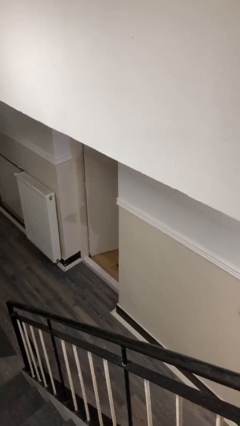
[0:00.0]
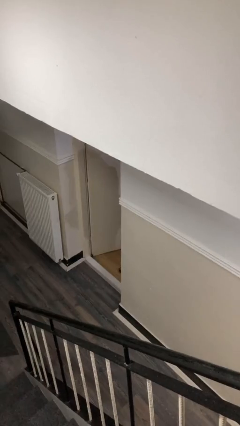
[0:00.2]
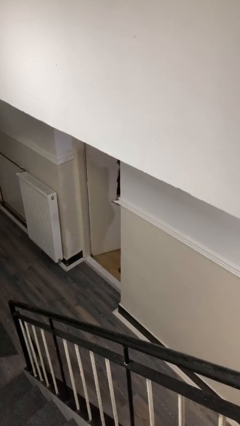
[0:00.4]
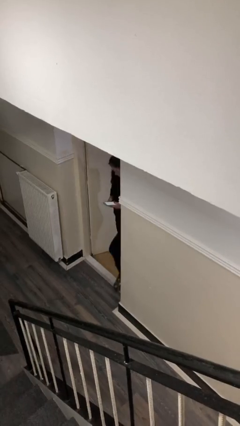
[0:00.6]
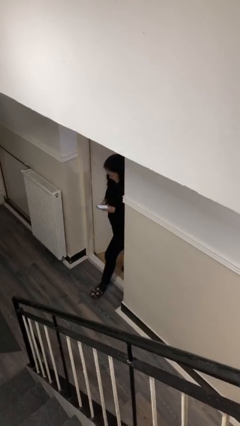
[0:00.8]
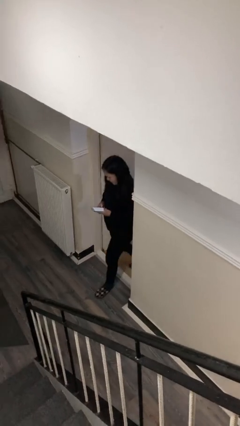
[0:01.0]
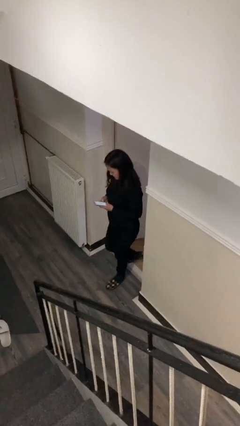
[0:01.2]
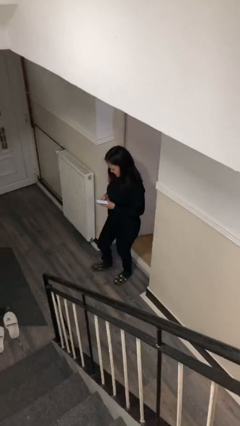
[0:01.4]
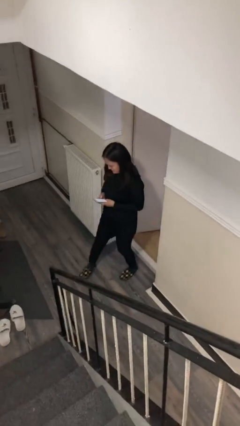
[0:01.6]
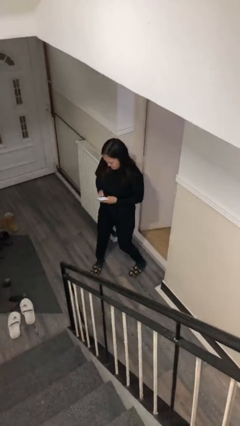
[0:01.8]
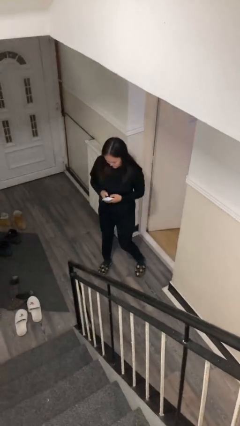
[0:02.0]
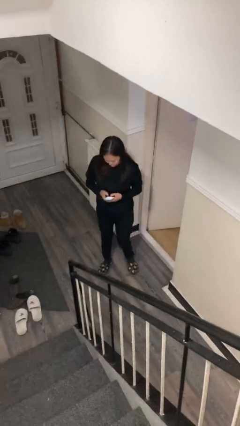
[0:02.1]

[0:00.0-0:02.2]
person enters scene through structure

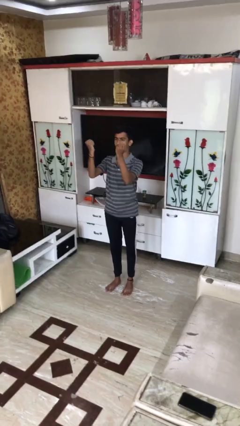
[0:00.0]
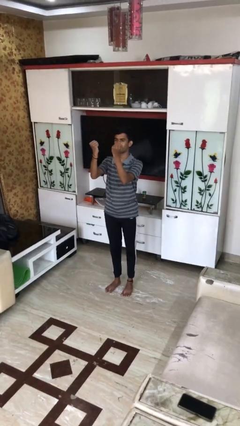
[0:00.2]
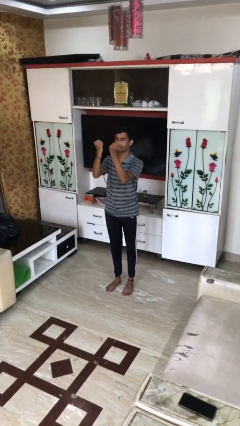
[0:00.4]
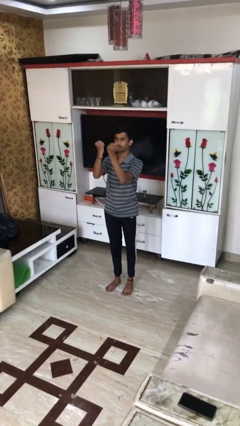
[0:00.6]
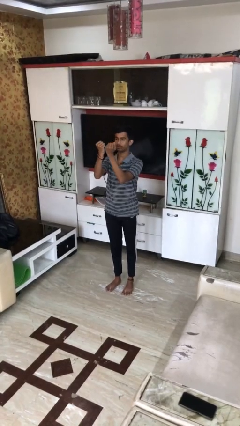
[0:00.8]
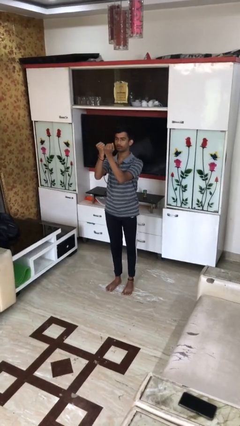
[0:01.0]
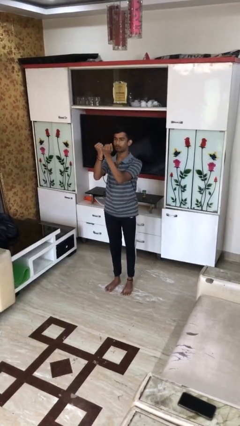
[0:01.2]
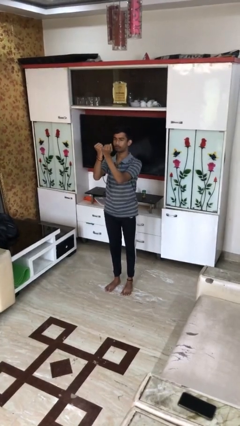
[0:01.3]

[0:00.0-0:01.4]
person gestures zoom out

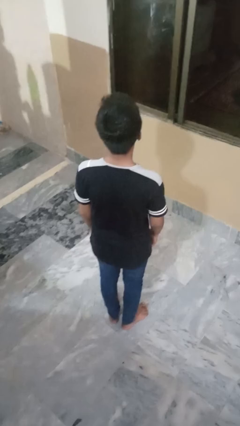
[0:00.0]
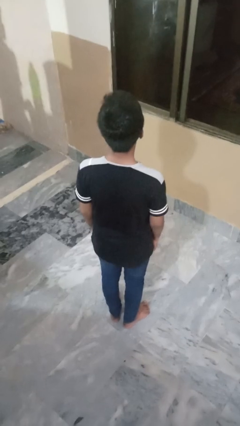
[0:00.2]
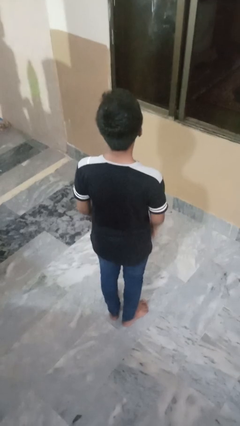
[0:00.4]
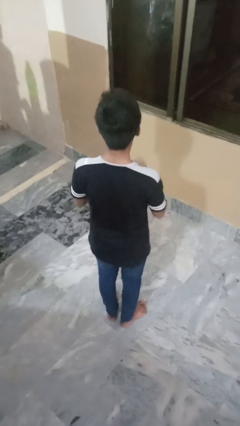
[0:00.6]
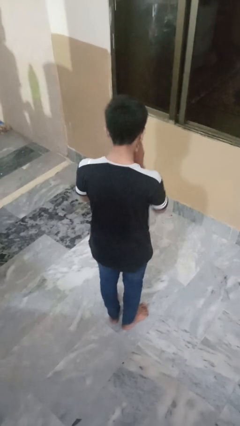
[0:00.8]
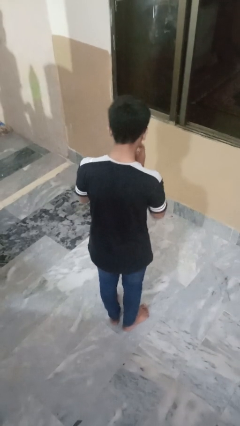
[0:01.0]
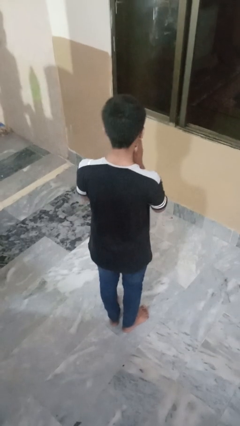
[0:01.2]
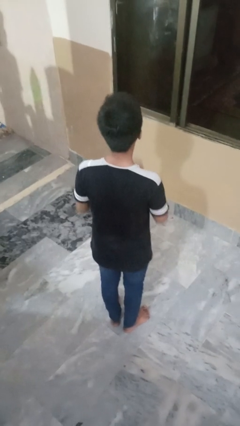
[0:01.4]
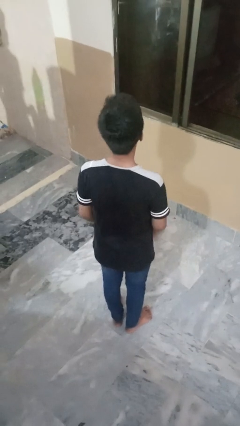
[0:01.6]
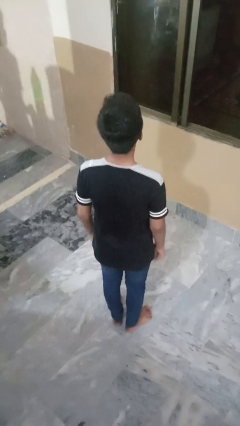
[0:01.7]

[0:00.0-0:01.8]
person sneezes into hand

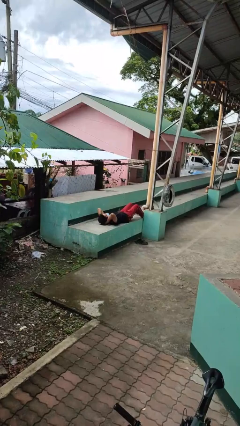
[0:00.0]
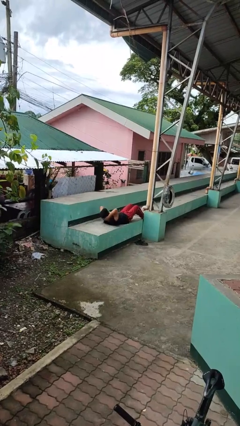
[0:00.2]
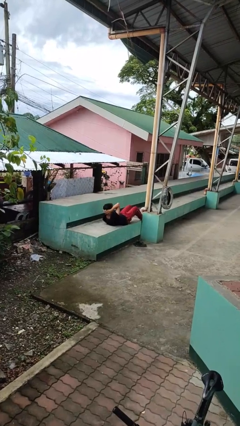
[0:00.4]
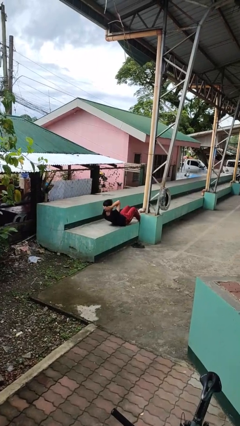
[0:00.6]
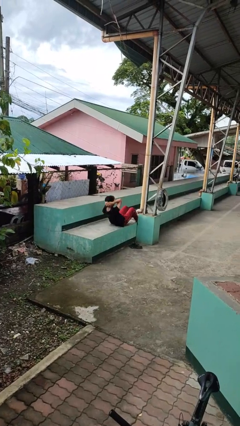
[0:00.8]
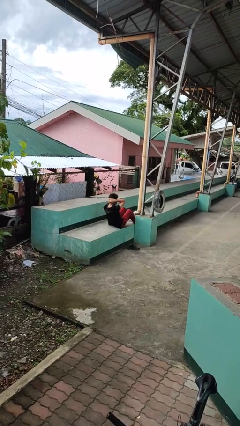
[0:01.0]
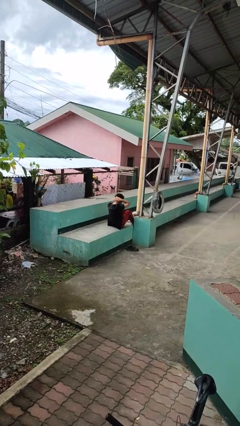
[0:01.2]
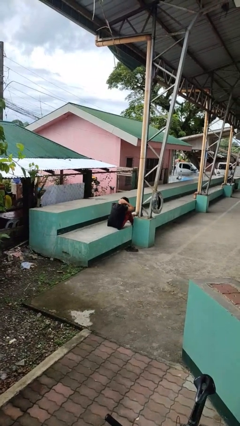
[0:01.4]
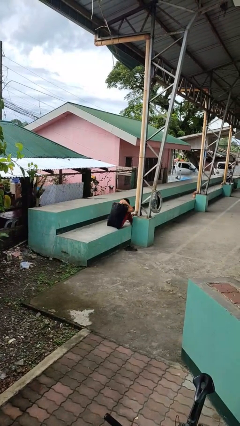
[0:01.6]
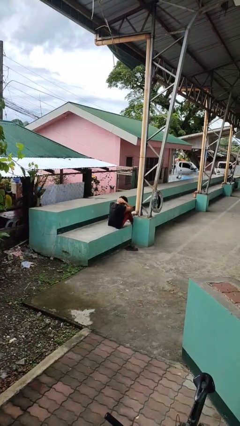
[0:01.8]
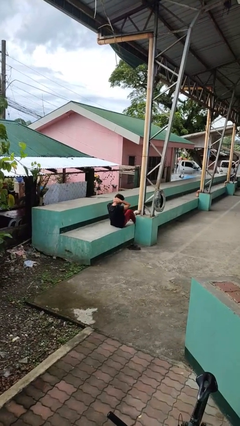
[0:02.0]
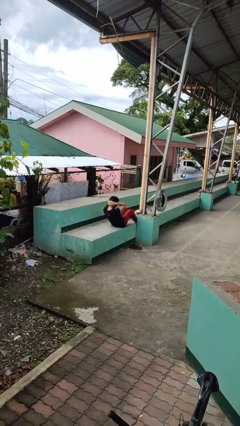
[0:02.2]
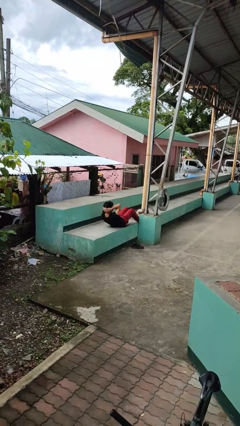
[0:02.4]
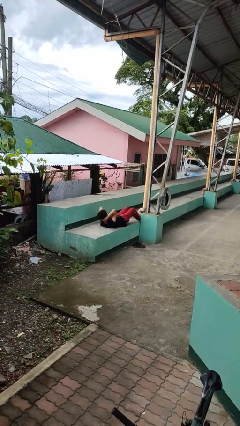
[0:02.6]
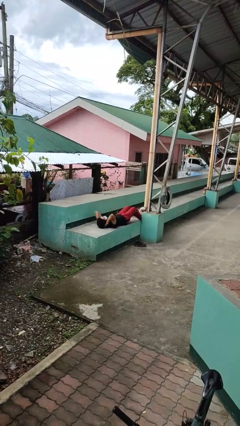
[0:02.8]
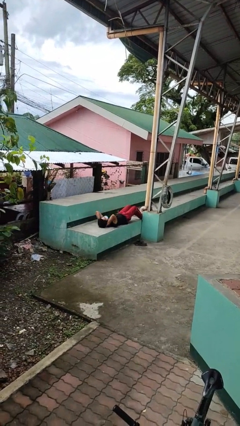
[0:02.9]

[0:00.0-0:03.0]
person exercises with situp

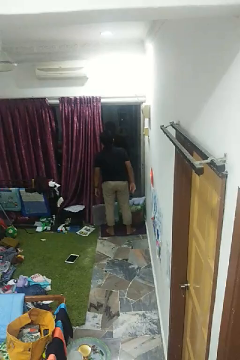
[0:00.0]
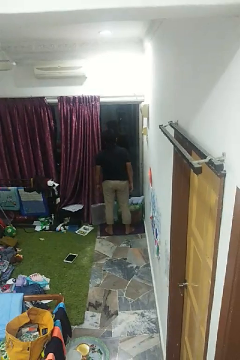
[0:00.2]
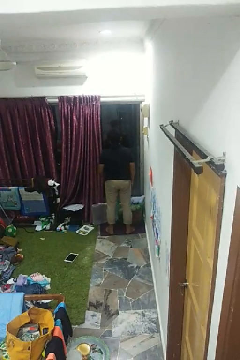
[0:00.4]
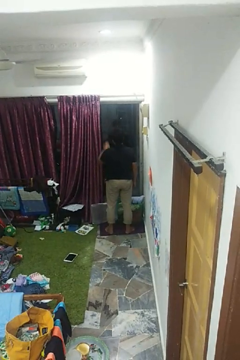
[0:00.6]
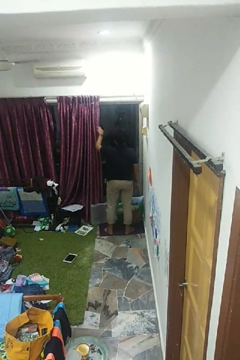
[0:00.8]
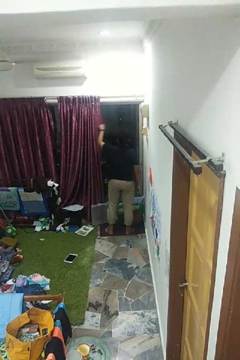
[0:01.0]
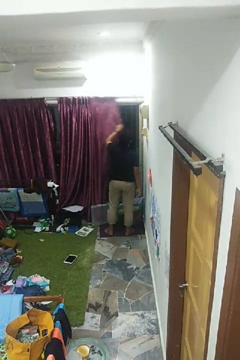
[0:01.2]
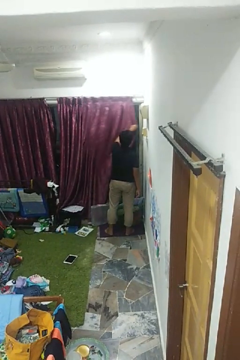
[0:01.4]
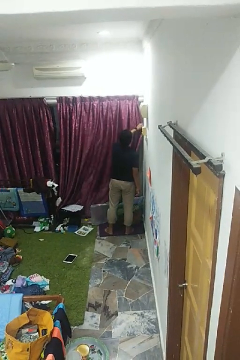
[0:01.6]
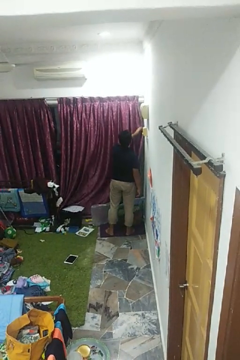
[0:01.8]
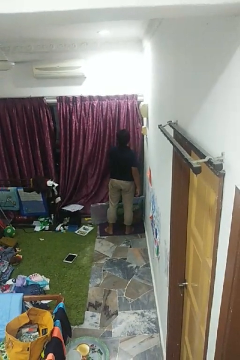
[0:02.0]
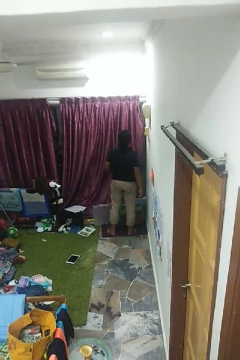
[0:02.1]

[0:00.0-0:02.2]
person closes curtains

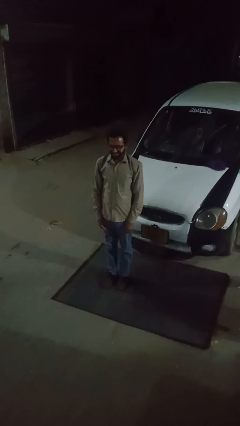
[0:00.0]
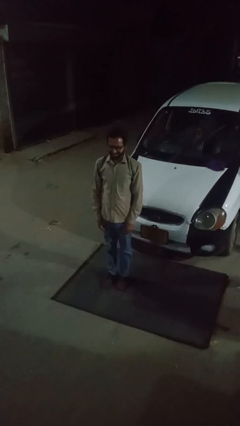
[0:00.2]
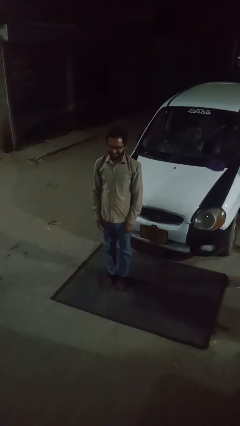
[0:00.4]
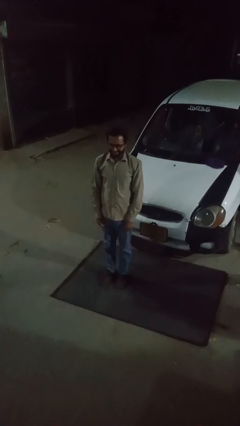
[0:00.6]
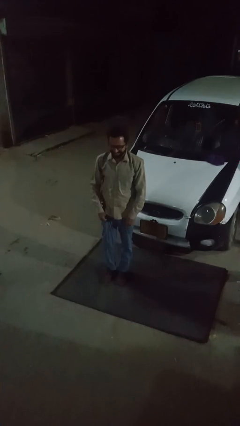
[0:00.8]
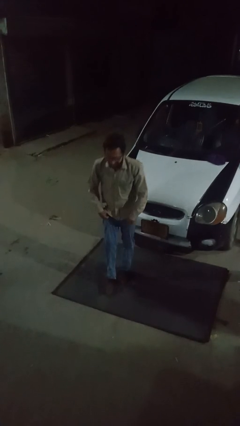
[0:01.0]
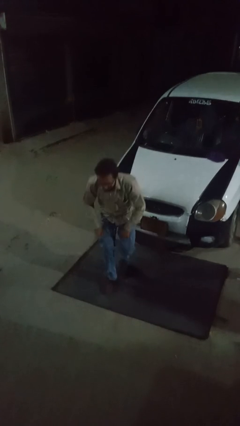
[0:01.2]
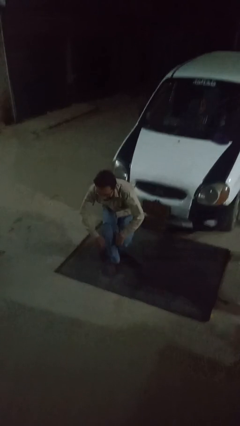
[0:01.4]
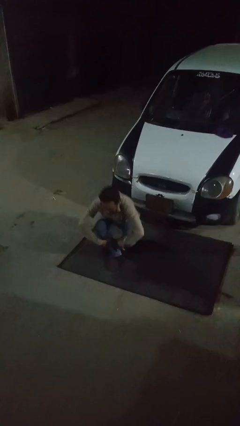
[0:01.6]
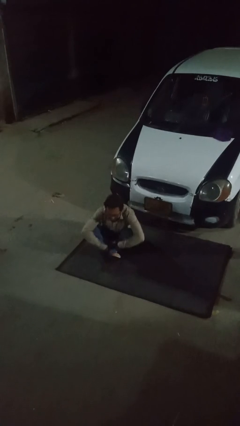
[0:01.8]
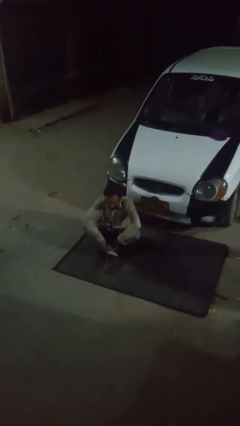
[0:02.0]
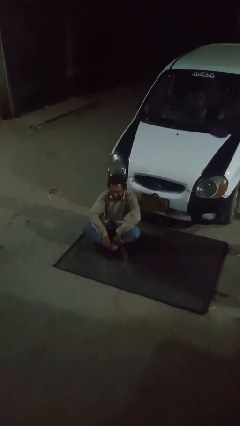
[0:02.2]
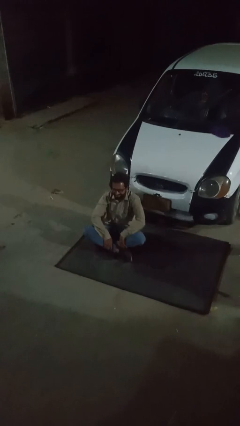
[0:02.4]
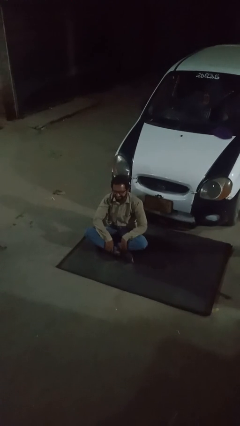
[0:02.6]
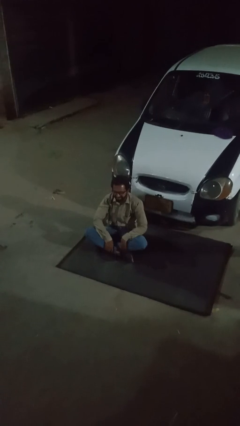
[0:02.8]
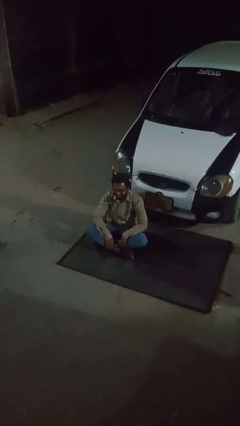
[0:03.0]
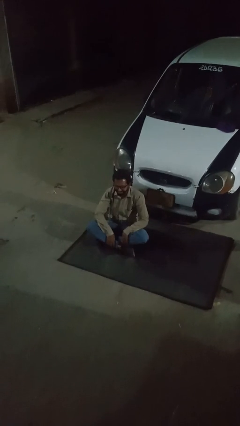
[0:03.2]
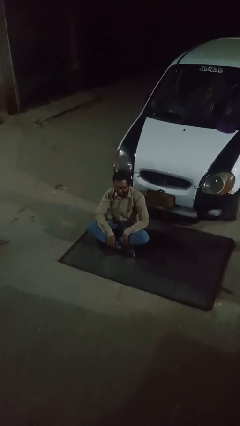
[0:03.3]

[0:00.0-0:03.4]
person sits crisscross

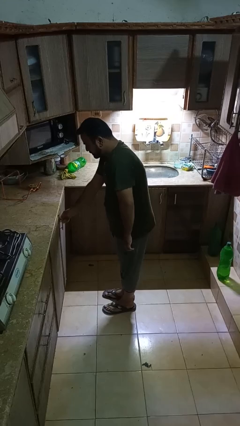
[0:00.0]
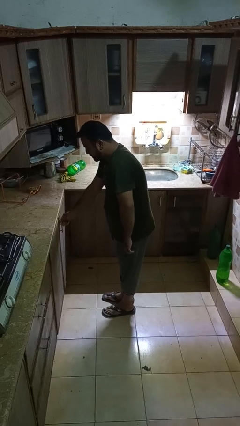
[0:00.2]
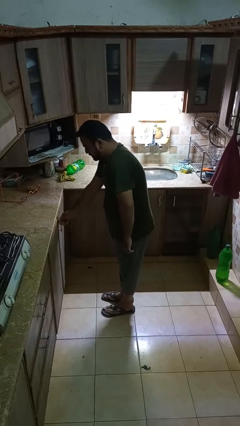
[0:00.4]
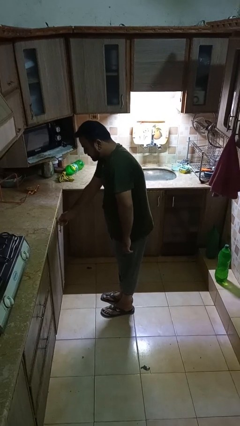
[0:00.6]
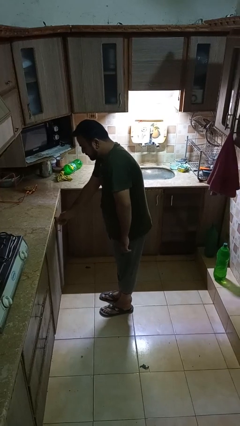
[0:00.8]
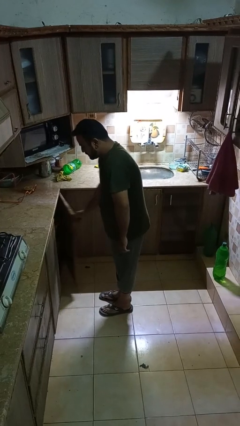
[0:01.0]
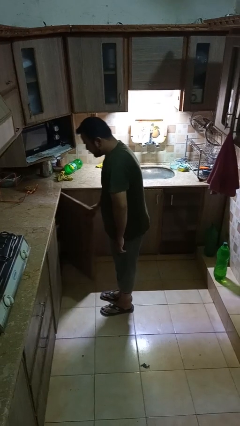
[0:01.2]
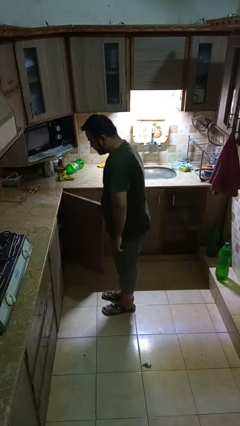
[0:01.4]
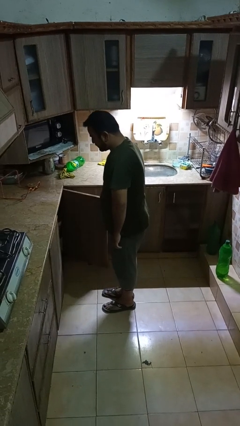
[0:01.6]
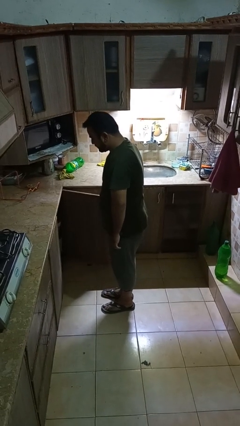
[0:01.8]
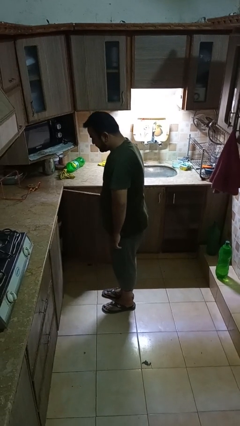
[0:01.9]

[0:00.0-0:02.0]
person opens cabinet

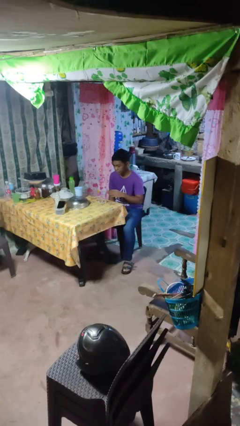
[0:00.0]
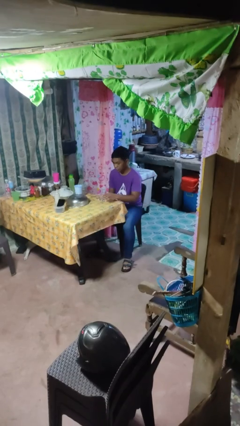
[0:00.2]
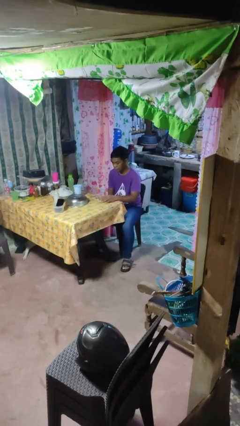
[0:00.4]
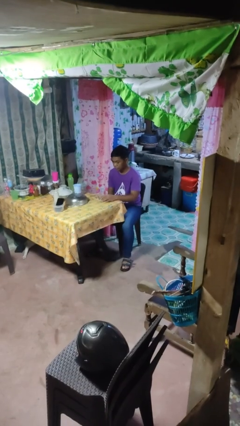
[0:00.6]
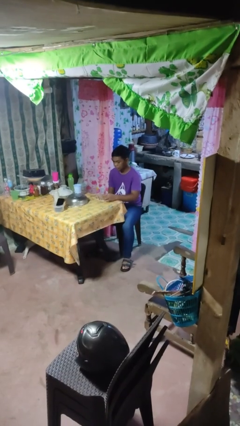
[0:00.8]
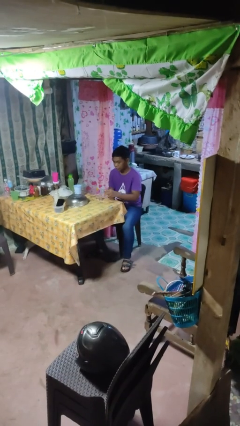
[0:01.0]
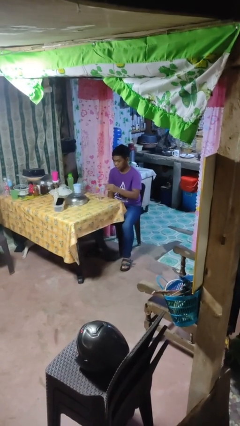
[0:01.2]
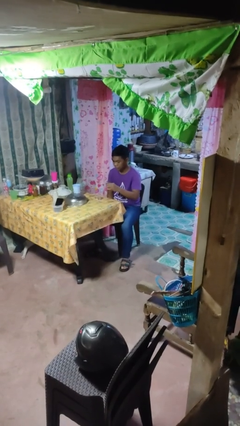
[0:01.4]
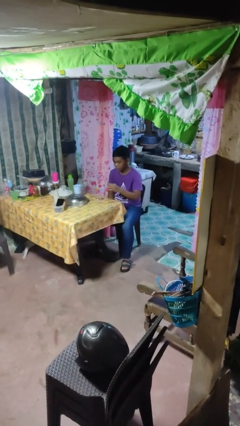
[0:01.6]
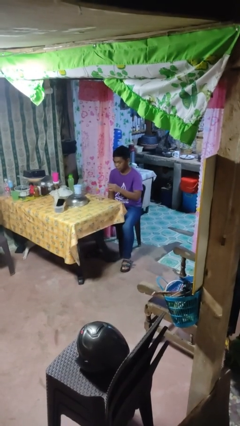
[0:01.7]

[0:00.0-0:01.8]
person picks up object from table
